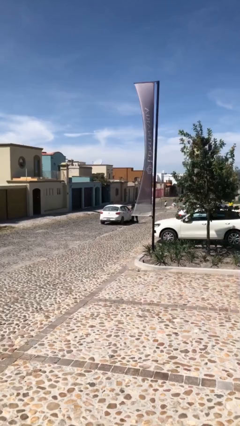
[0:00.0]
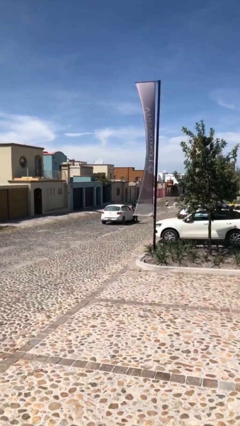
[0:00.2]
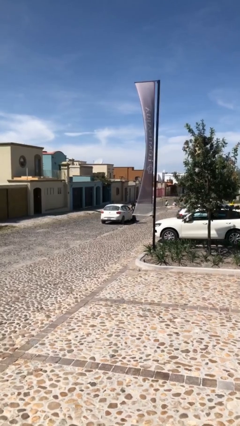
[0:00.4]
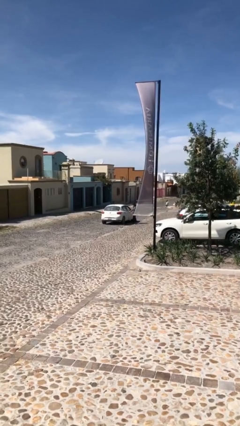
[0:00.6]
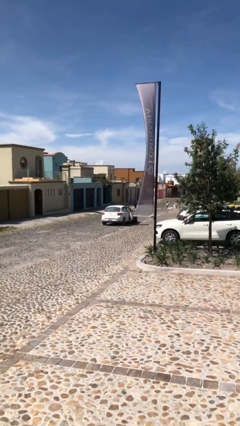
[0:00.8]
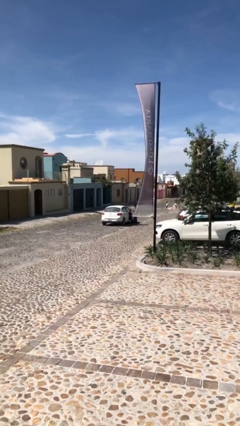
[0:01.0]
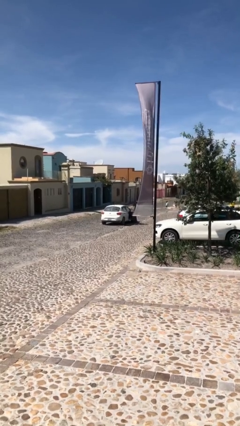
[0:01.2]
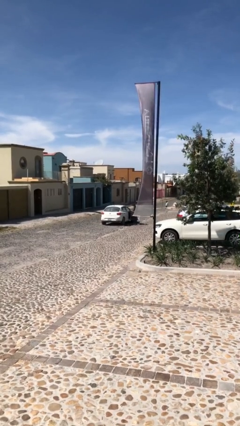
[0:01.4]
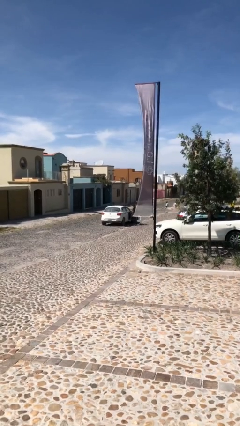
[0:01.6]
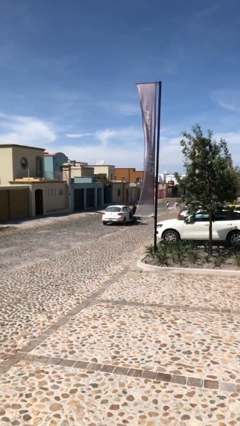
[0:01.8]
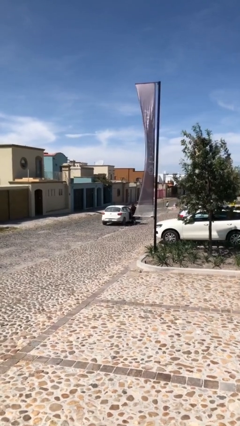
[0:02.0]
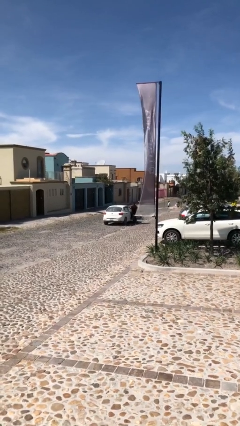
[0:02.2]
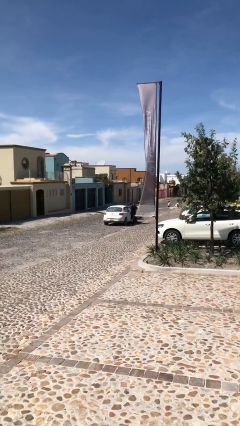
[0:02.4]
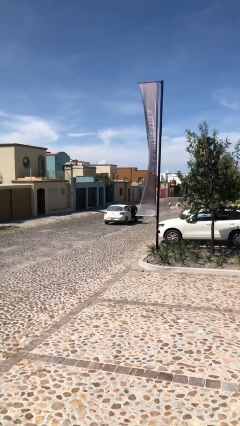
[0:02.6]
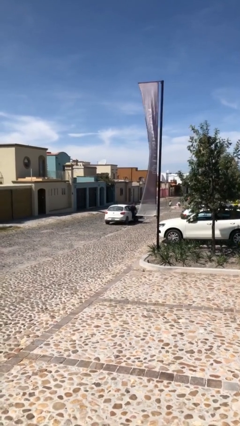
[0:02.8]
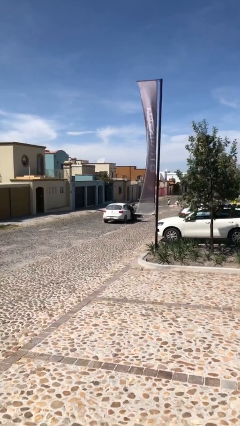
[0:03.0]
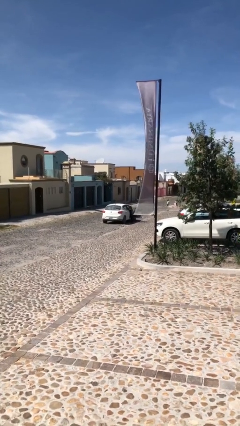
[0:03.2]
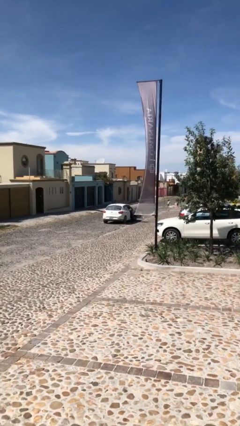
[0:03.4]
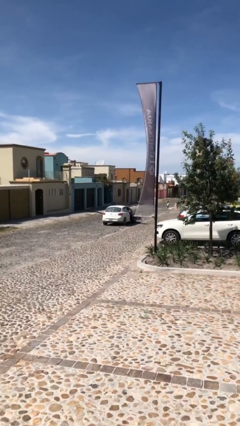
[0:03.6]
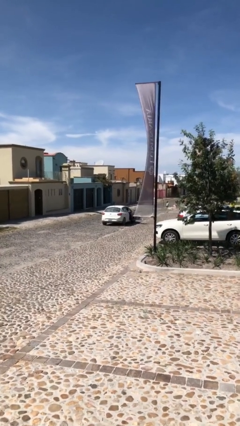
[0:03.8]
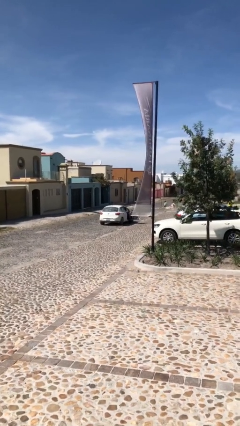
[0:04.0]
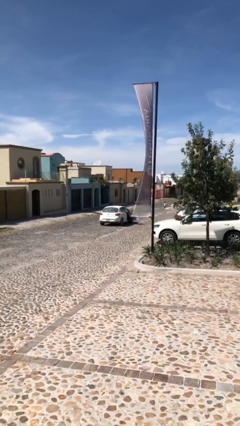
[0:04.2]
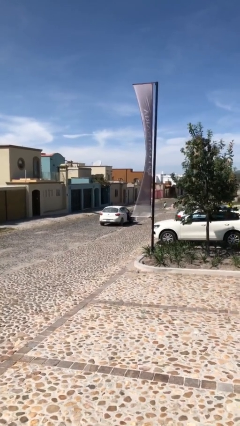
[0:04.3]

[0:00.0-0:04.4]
car picks up person

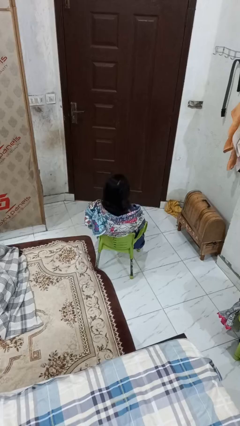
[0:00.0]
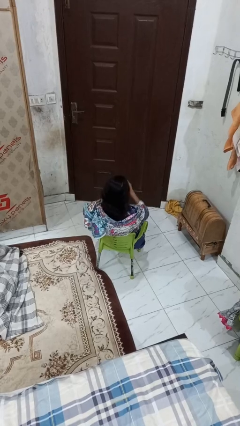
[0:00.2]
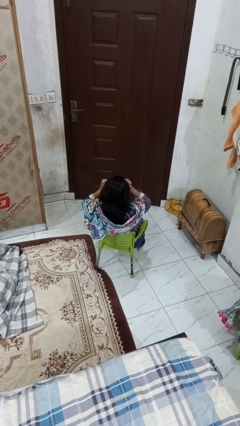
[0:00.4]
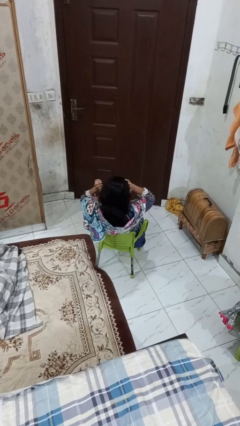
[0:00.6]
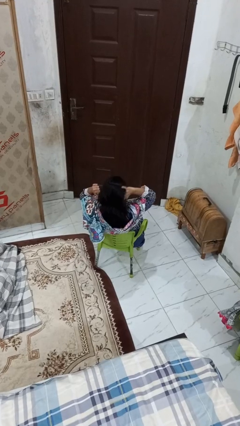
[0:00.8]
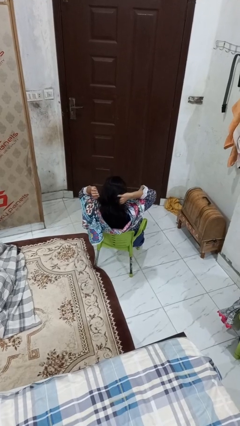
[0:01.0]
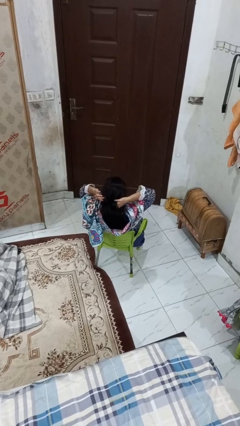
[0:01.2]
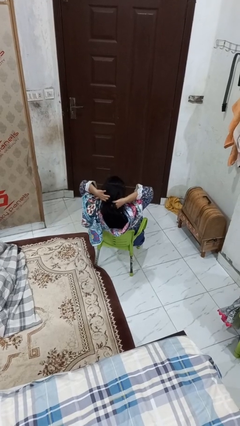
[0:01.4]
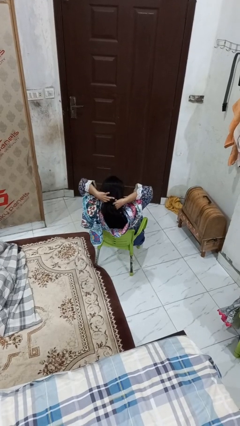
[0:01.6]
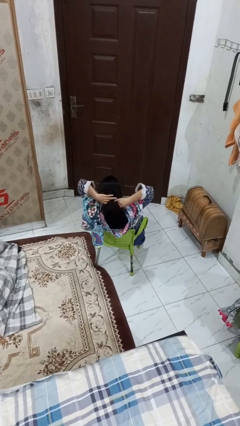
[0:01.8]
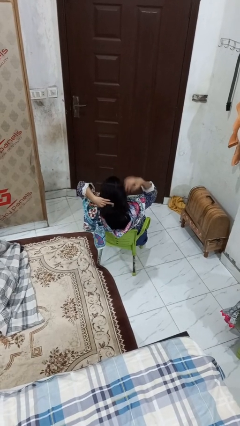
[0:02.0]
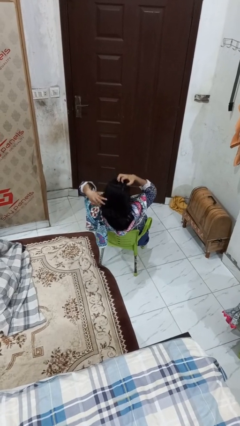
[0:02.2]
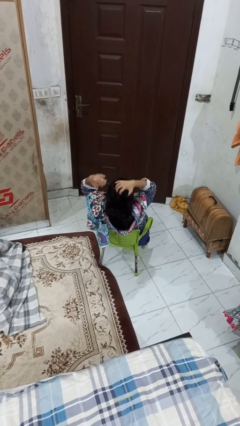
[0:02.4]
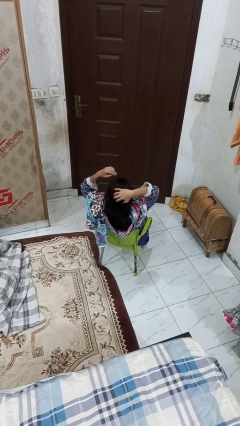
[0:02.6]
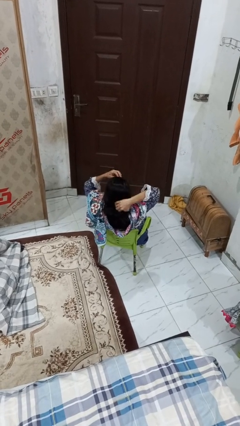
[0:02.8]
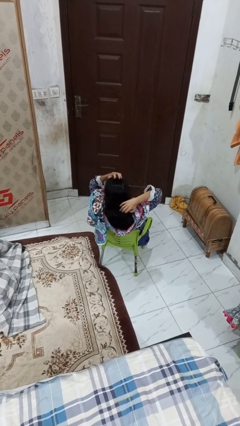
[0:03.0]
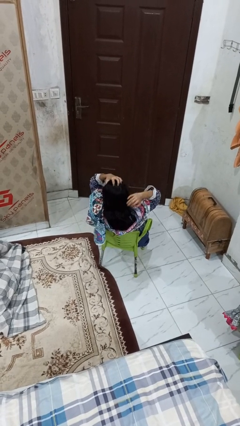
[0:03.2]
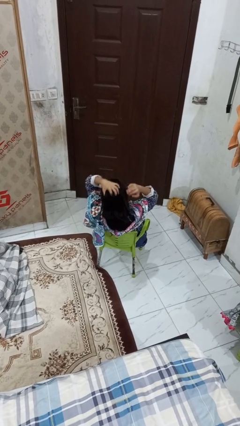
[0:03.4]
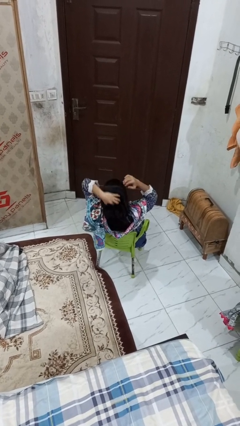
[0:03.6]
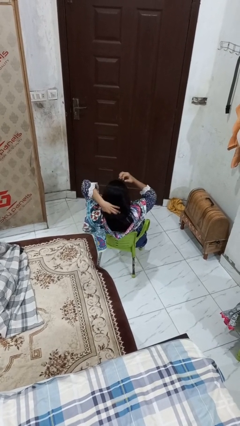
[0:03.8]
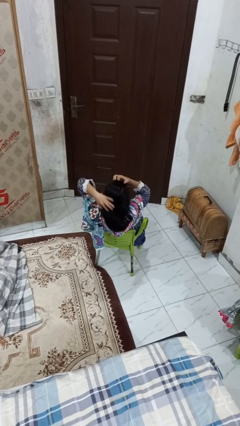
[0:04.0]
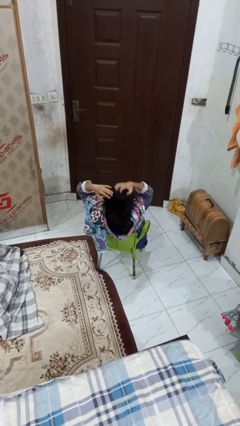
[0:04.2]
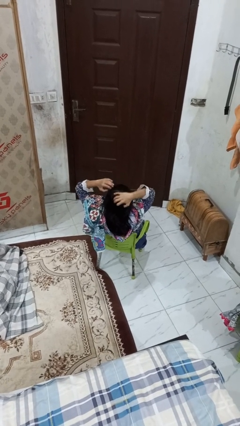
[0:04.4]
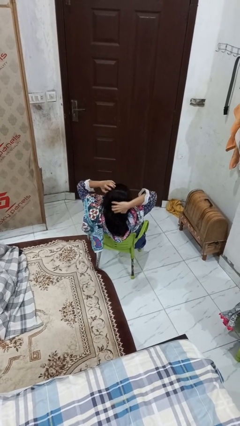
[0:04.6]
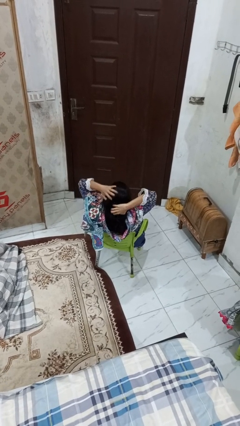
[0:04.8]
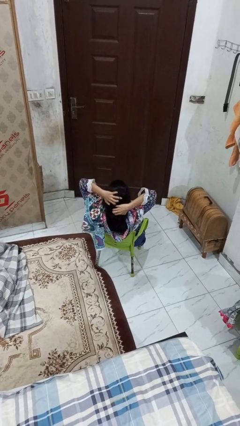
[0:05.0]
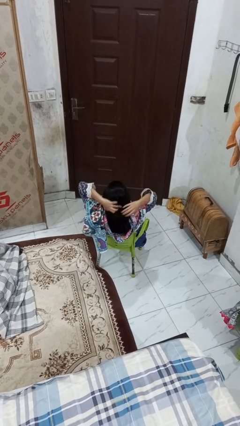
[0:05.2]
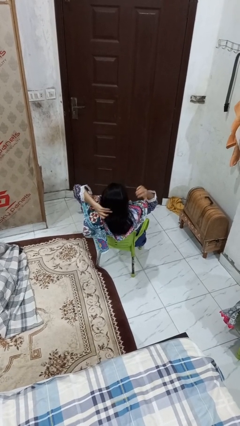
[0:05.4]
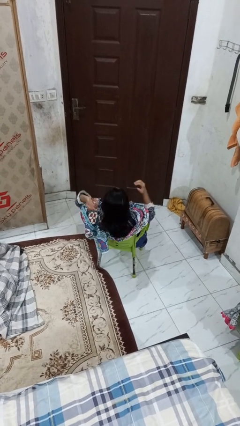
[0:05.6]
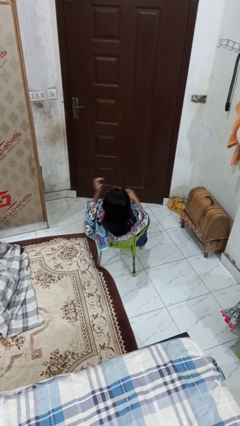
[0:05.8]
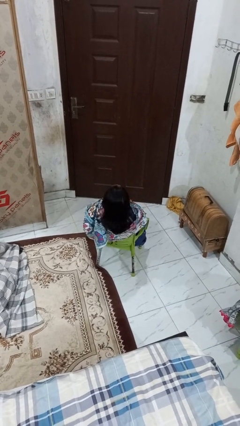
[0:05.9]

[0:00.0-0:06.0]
person strokes hair

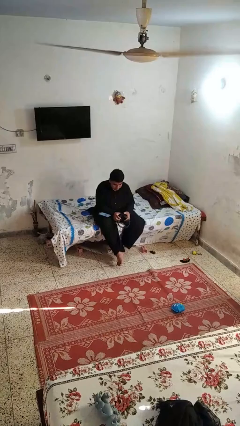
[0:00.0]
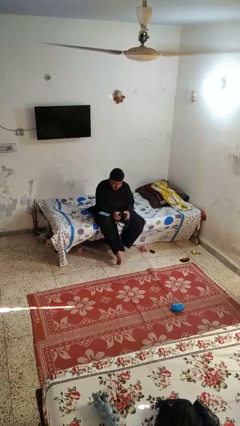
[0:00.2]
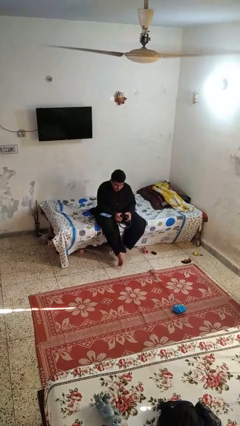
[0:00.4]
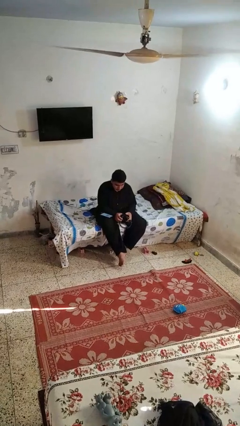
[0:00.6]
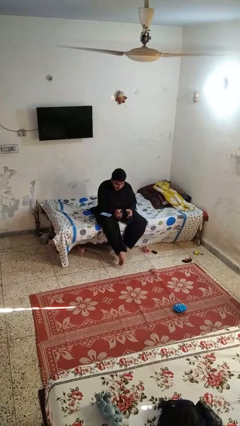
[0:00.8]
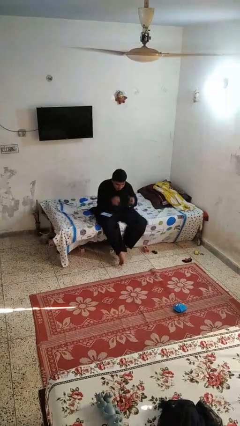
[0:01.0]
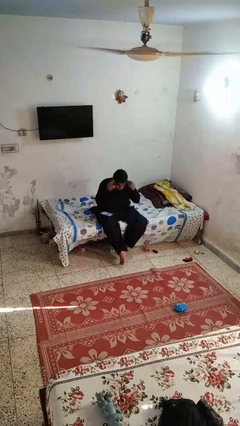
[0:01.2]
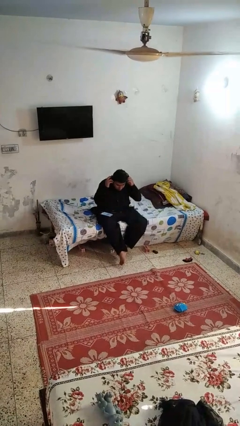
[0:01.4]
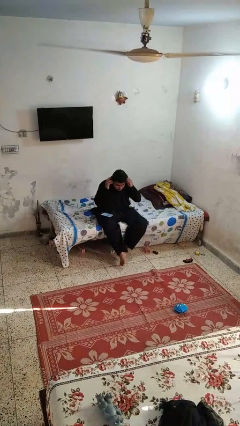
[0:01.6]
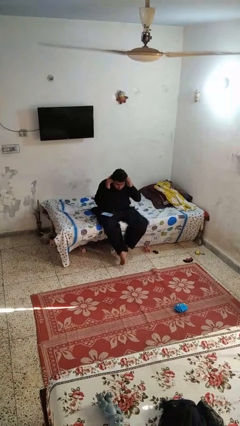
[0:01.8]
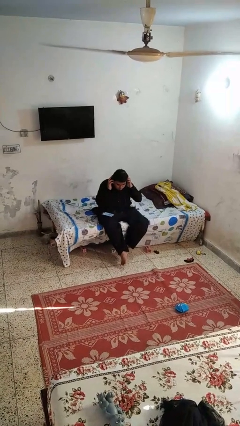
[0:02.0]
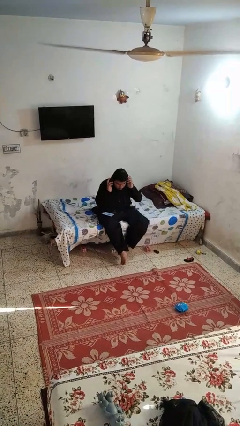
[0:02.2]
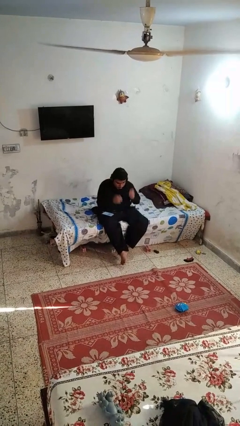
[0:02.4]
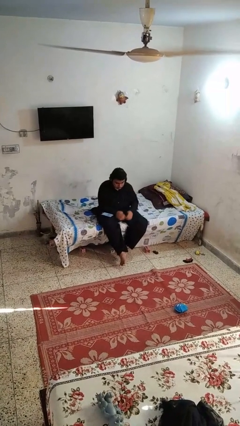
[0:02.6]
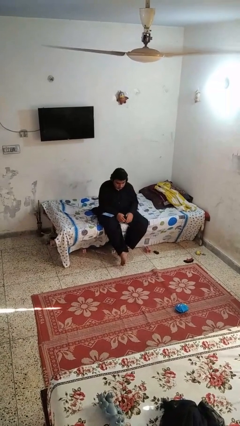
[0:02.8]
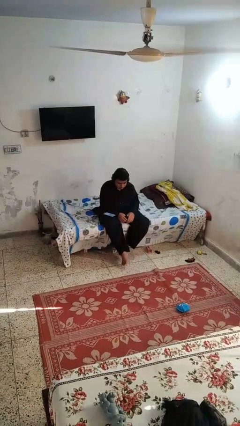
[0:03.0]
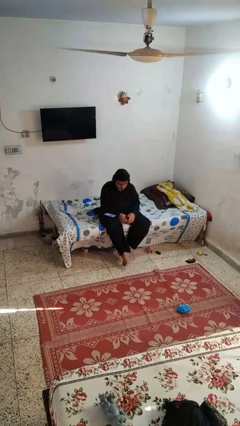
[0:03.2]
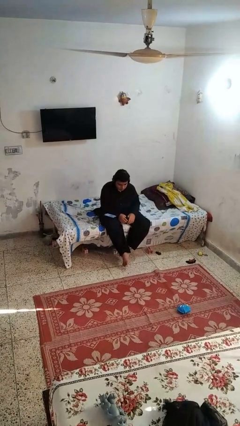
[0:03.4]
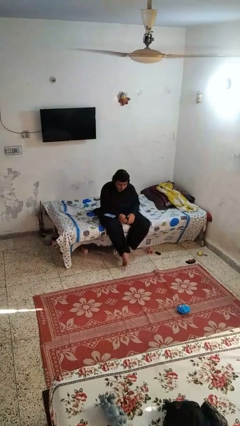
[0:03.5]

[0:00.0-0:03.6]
person puts on headphones

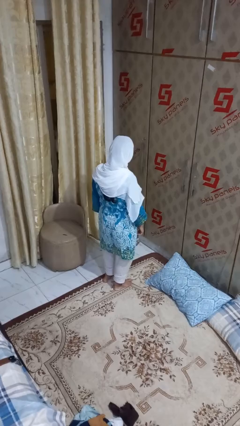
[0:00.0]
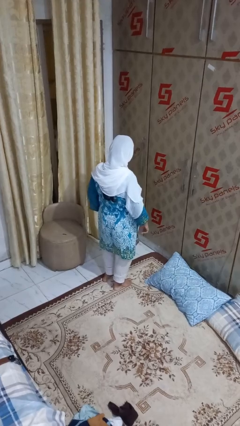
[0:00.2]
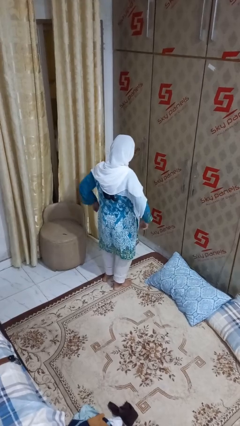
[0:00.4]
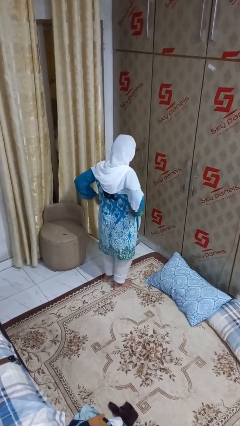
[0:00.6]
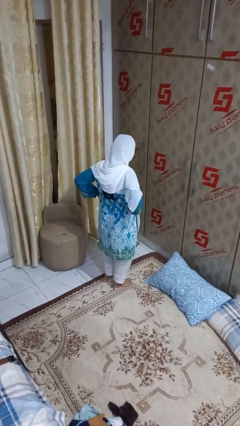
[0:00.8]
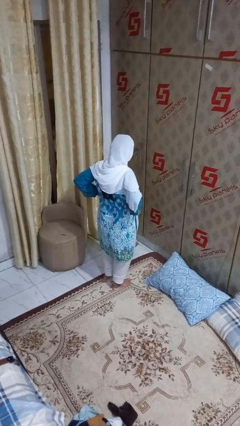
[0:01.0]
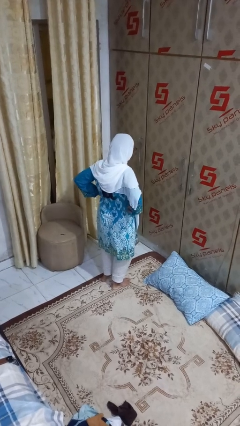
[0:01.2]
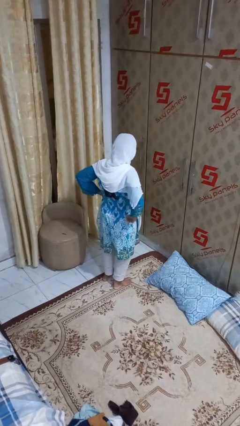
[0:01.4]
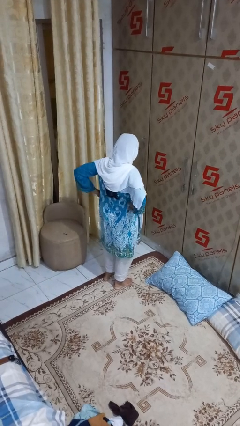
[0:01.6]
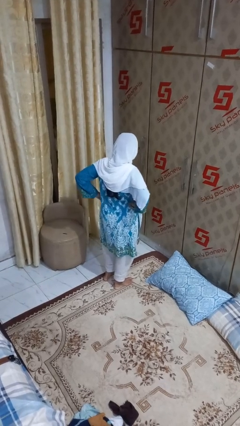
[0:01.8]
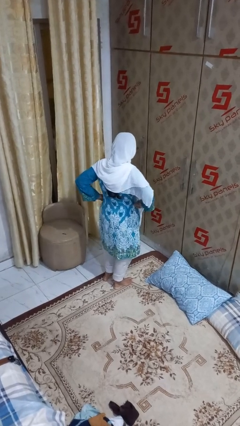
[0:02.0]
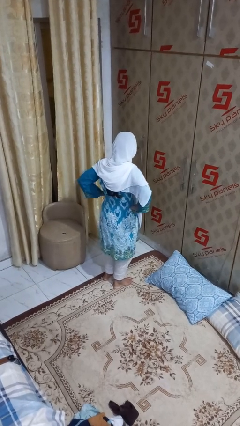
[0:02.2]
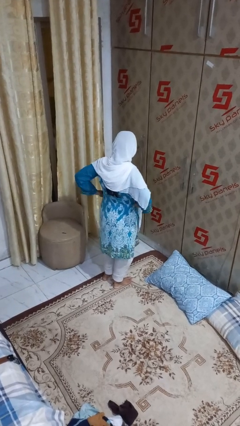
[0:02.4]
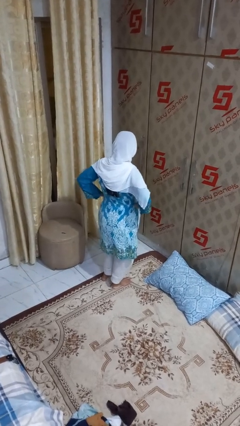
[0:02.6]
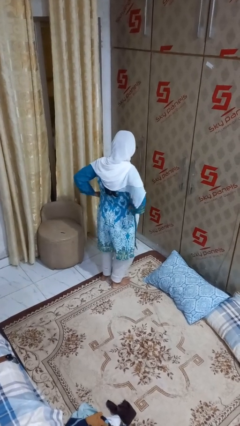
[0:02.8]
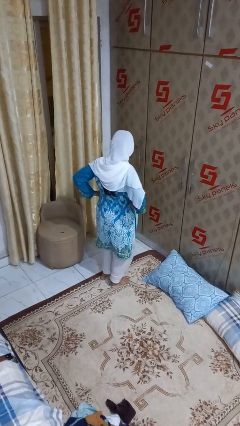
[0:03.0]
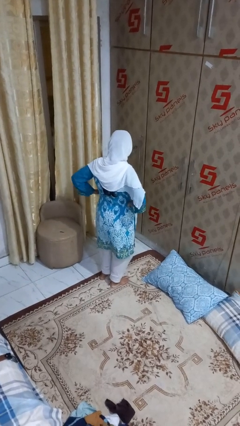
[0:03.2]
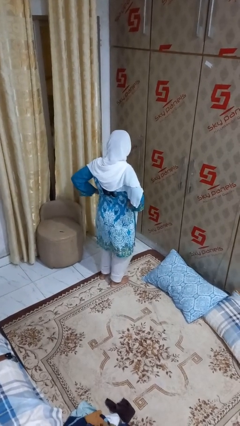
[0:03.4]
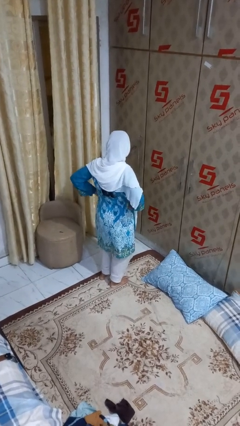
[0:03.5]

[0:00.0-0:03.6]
person hikes up pants
